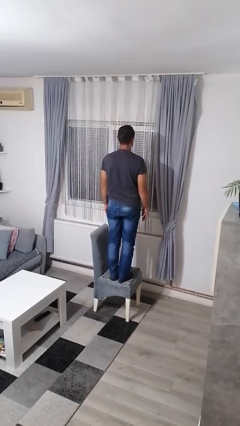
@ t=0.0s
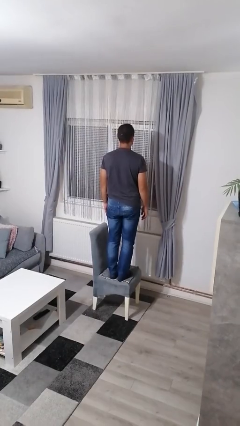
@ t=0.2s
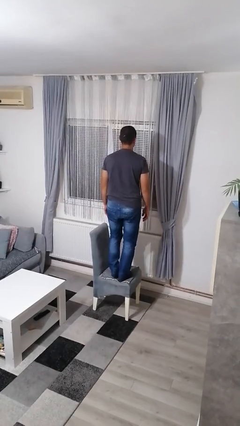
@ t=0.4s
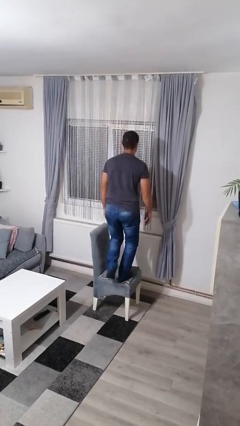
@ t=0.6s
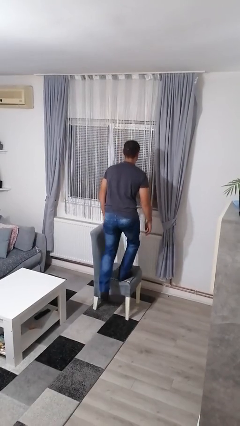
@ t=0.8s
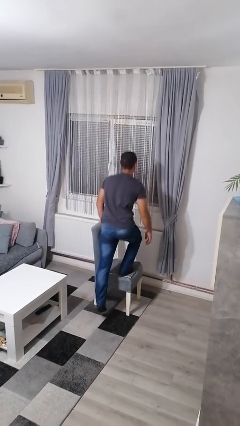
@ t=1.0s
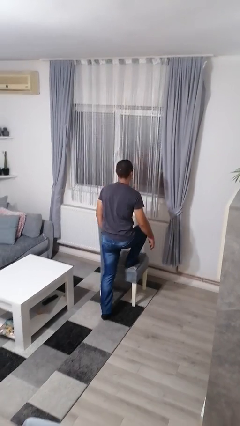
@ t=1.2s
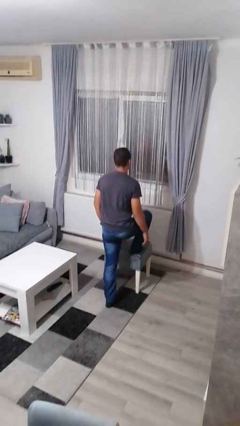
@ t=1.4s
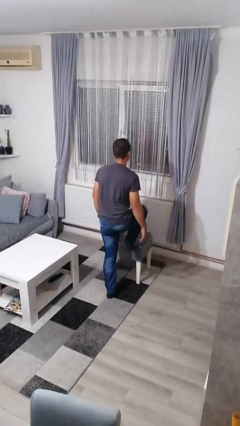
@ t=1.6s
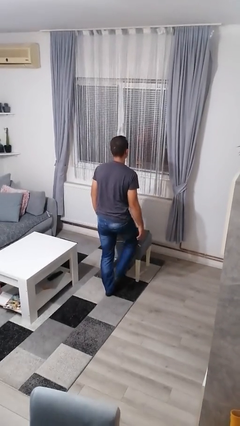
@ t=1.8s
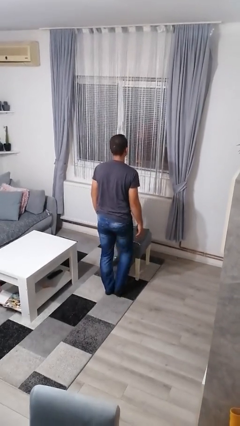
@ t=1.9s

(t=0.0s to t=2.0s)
person climbs off chair

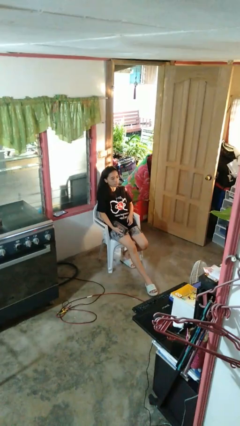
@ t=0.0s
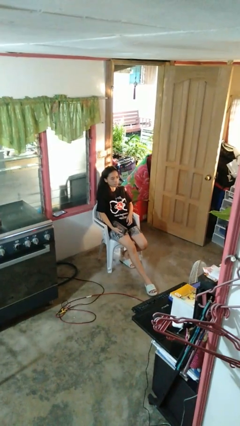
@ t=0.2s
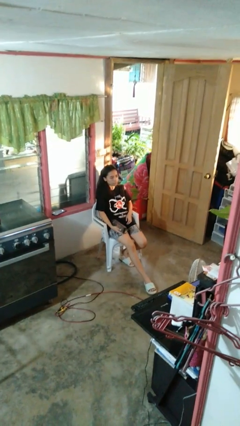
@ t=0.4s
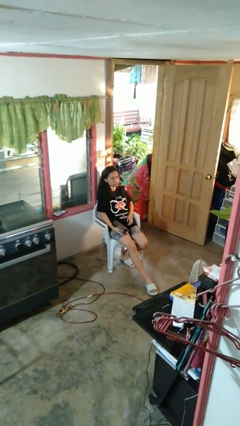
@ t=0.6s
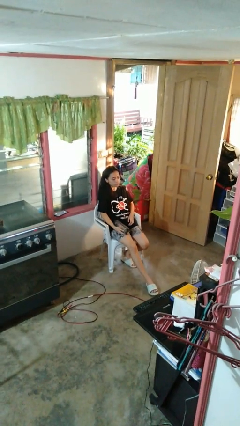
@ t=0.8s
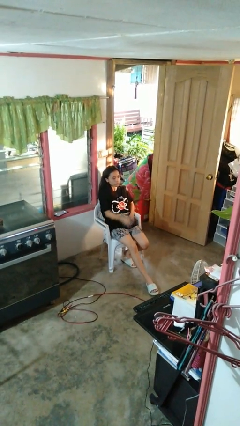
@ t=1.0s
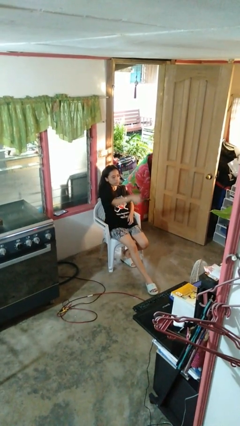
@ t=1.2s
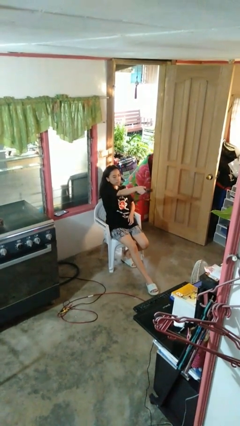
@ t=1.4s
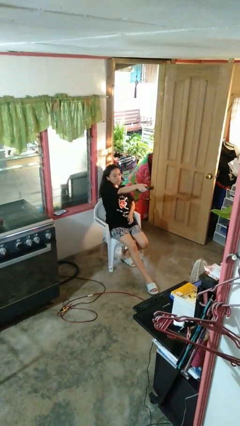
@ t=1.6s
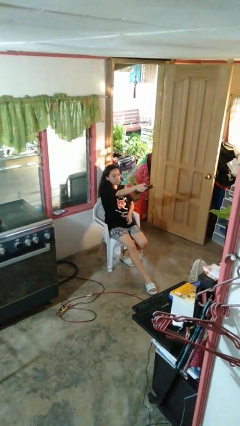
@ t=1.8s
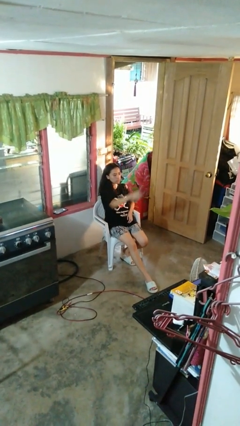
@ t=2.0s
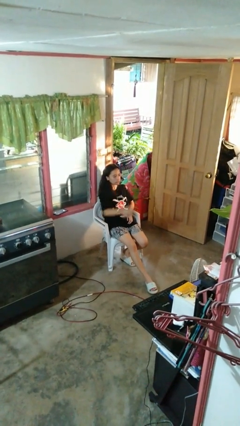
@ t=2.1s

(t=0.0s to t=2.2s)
person uses television remote

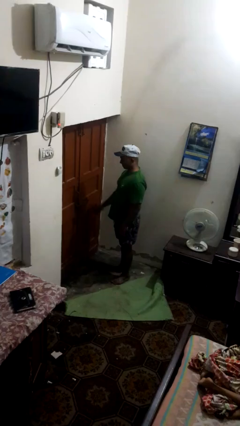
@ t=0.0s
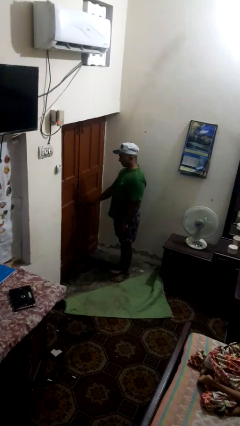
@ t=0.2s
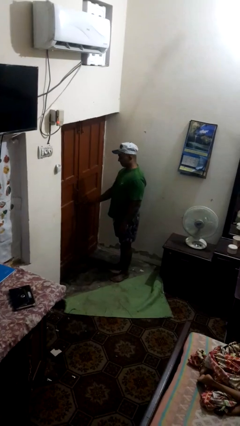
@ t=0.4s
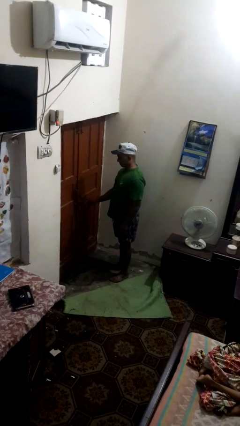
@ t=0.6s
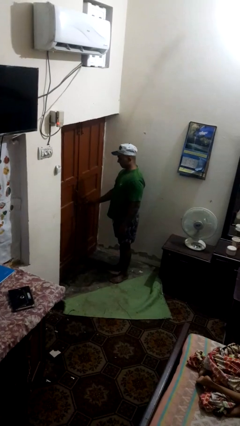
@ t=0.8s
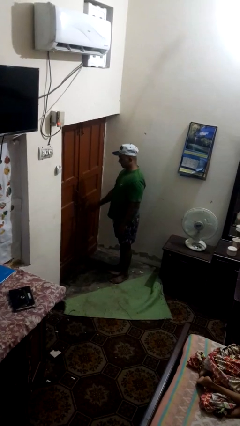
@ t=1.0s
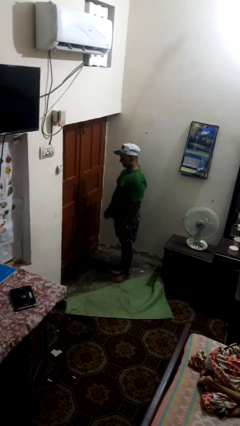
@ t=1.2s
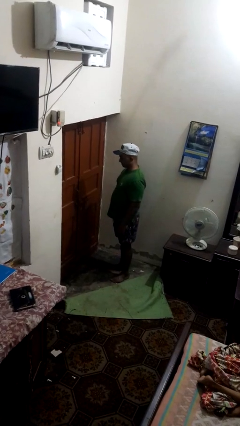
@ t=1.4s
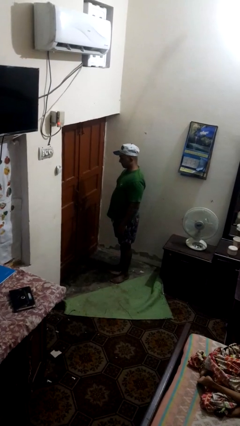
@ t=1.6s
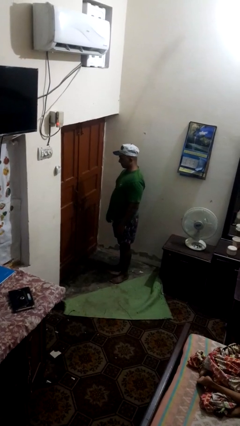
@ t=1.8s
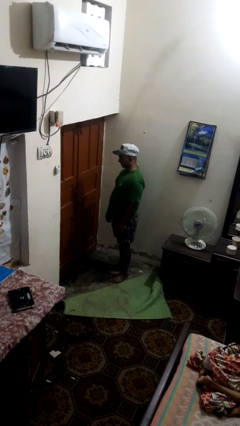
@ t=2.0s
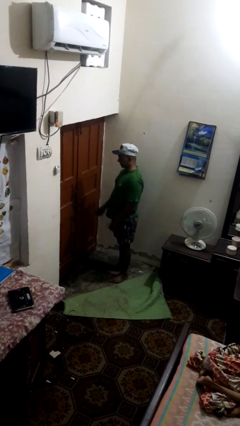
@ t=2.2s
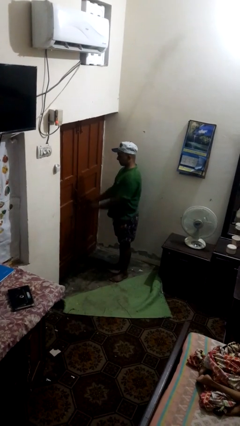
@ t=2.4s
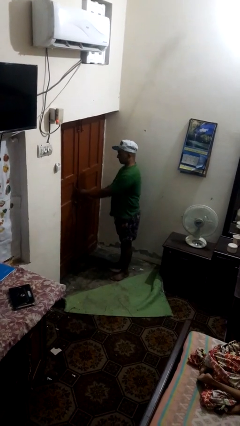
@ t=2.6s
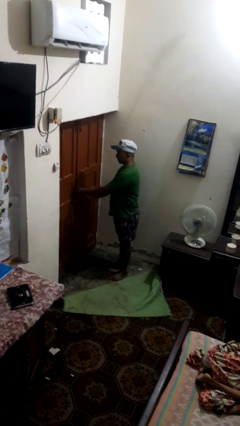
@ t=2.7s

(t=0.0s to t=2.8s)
person unlocks door with keys

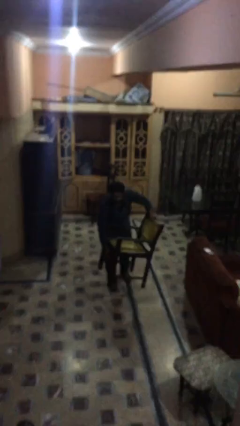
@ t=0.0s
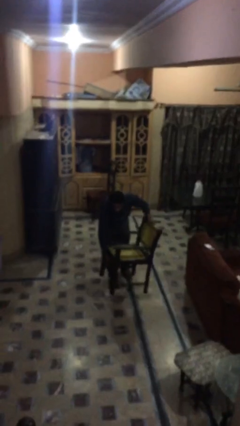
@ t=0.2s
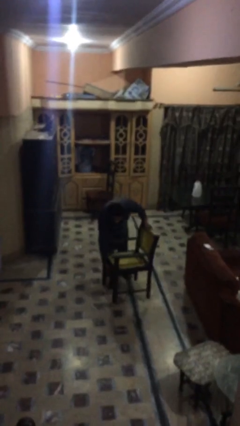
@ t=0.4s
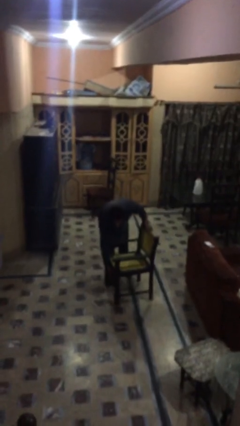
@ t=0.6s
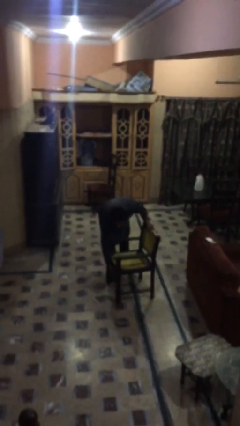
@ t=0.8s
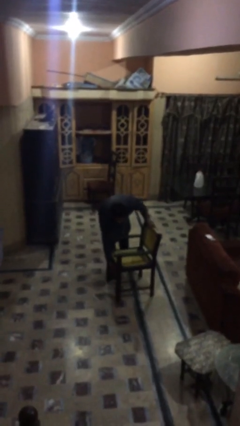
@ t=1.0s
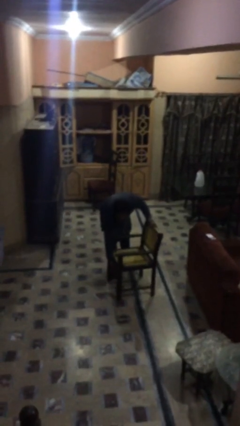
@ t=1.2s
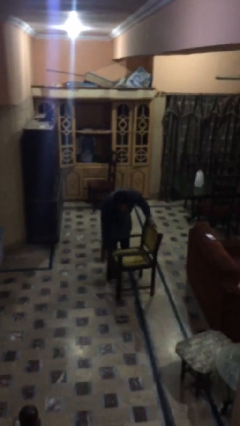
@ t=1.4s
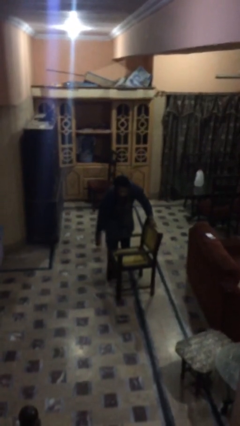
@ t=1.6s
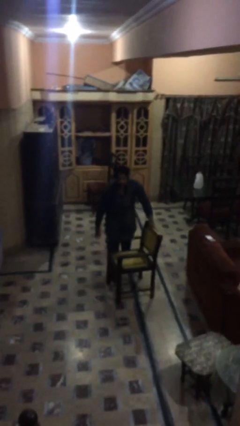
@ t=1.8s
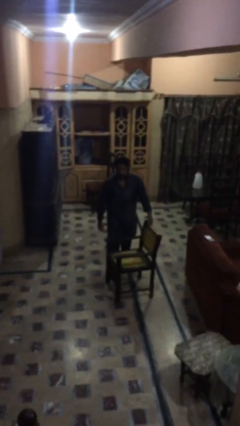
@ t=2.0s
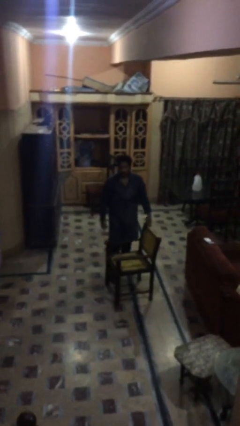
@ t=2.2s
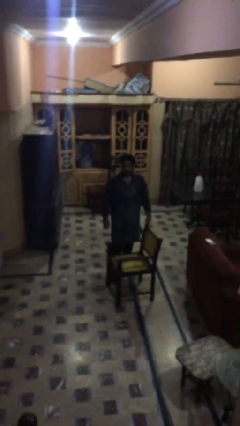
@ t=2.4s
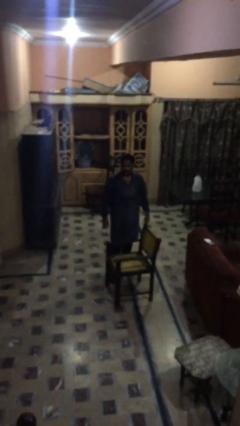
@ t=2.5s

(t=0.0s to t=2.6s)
person puts down object on floor

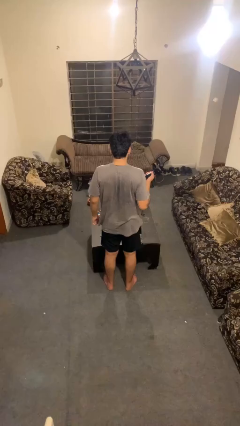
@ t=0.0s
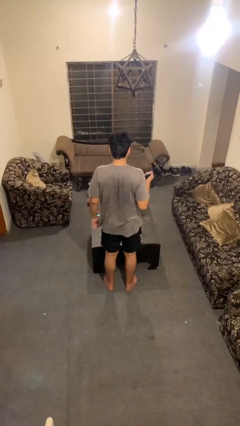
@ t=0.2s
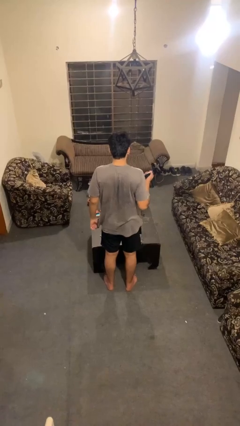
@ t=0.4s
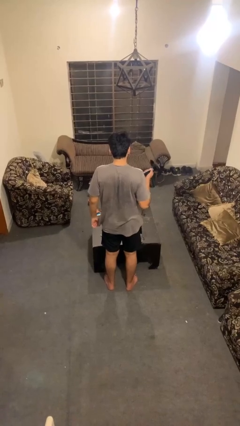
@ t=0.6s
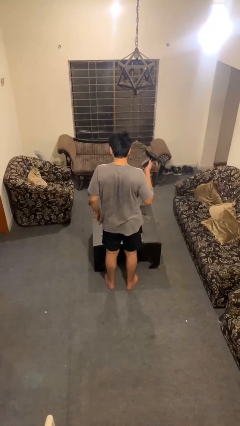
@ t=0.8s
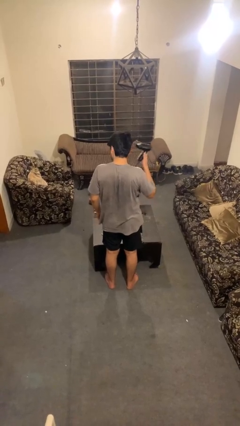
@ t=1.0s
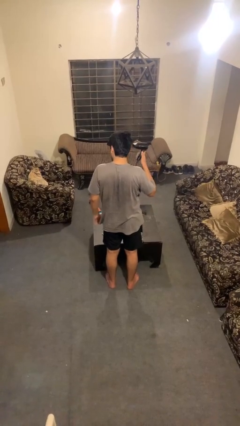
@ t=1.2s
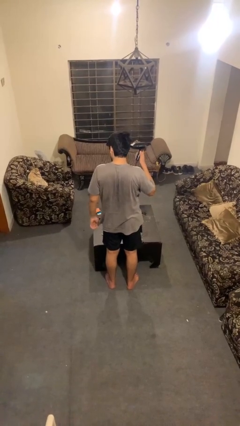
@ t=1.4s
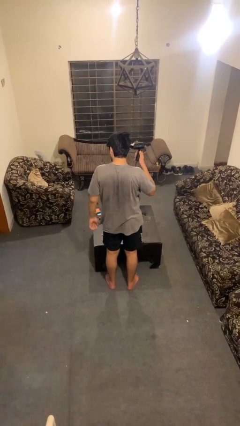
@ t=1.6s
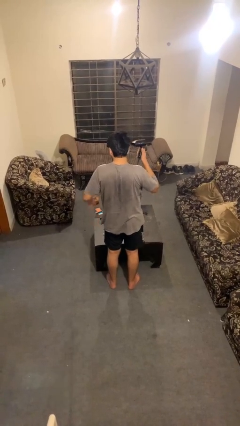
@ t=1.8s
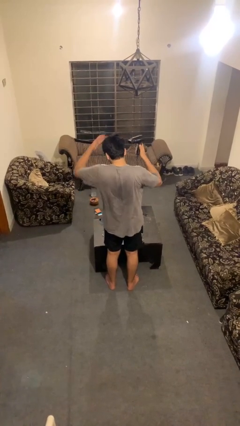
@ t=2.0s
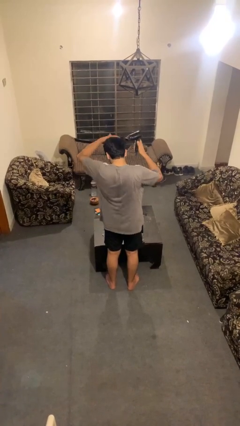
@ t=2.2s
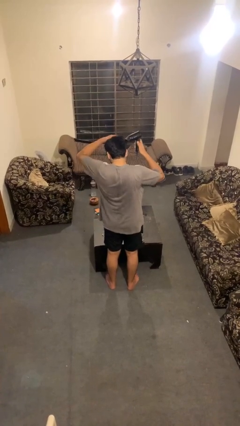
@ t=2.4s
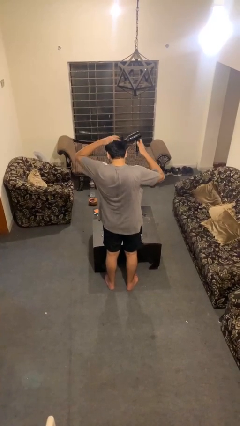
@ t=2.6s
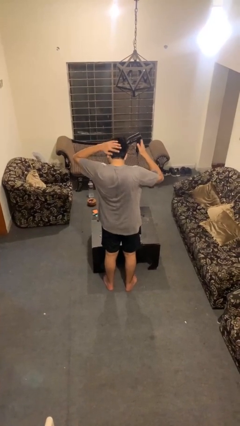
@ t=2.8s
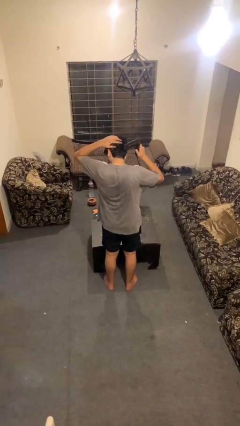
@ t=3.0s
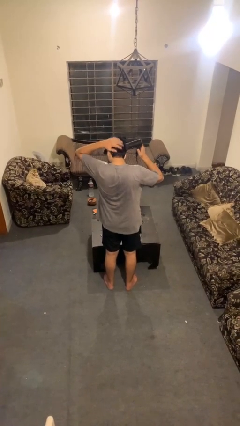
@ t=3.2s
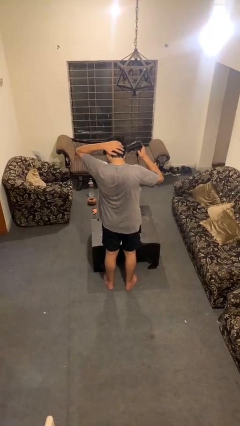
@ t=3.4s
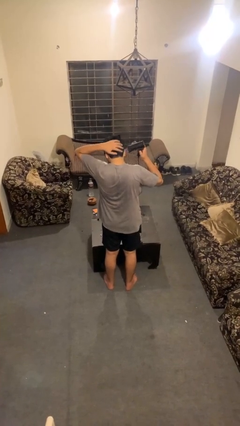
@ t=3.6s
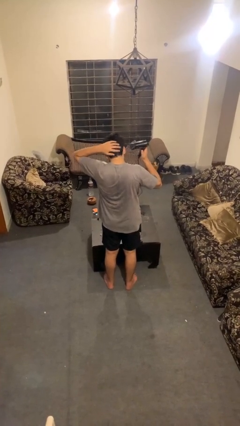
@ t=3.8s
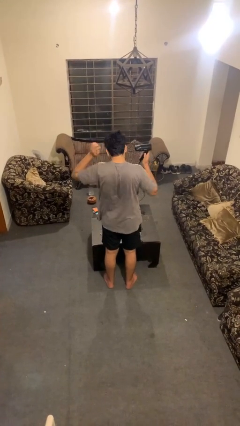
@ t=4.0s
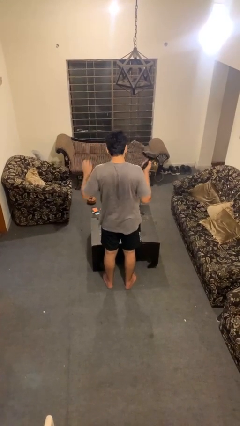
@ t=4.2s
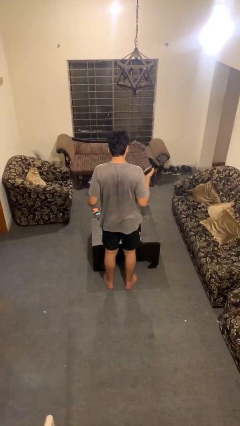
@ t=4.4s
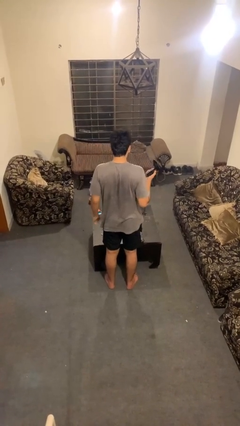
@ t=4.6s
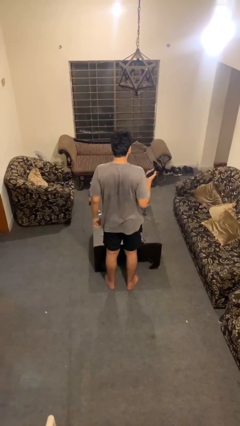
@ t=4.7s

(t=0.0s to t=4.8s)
person dries hair with hairdryer

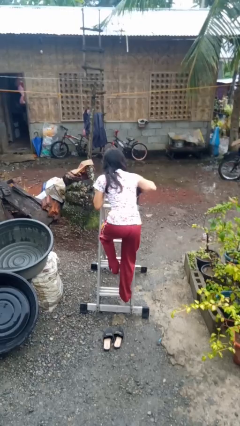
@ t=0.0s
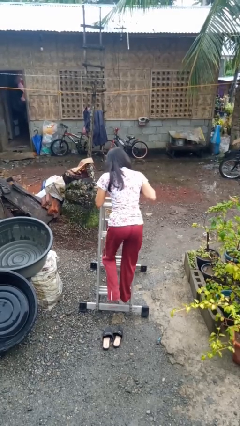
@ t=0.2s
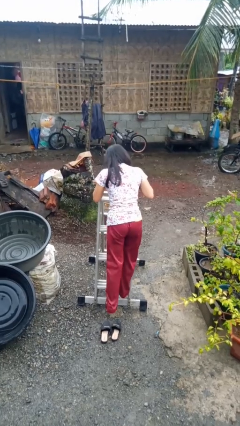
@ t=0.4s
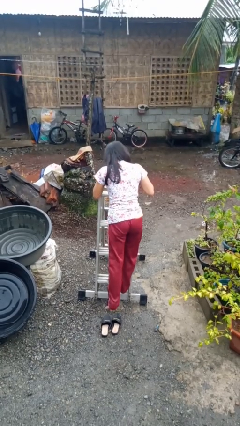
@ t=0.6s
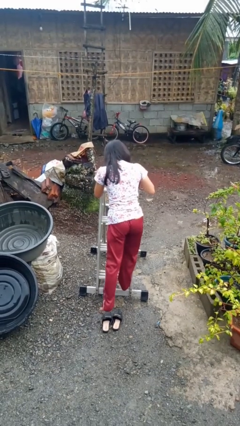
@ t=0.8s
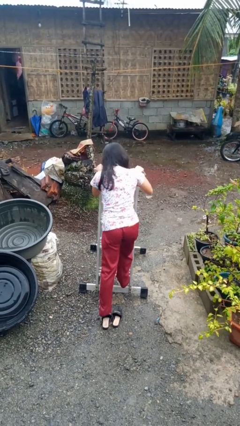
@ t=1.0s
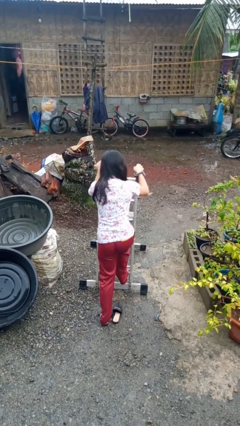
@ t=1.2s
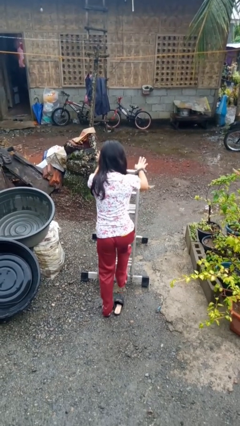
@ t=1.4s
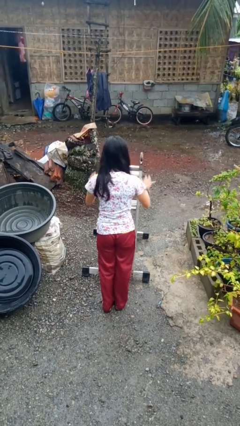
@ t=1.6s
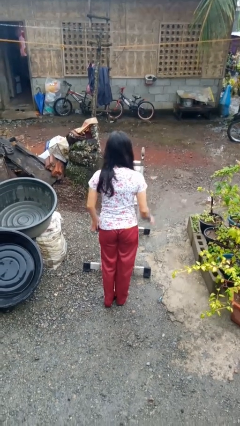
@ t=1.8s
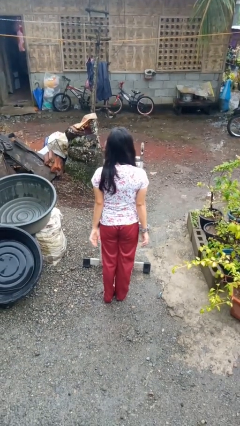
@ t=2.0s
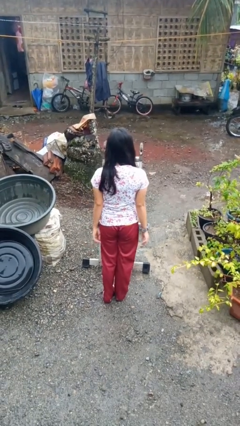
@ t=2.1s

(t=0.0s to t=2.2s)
person climbs down ladder

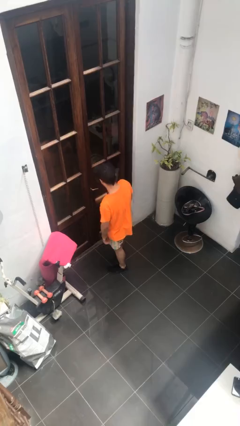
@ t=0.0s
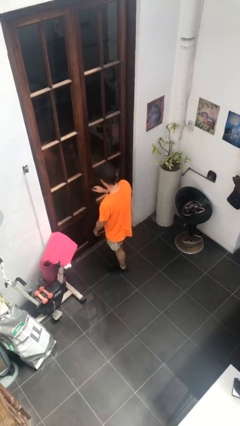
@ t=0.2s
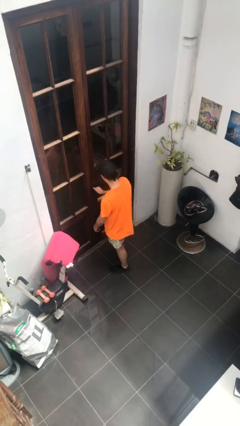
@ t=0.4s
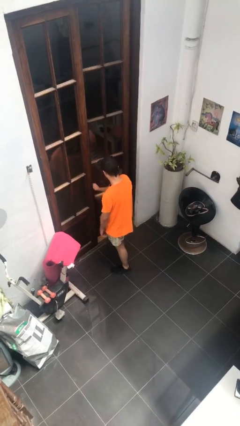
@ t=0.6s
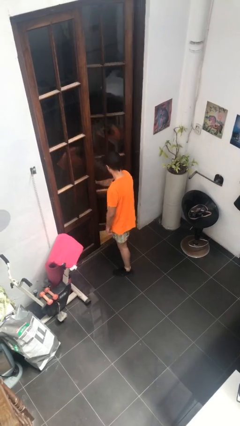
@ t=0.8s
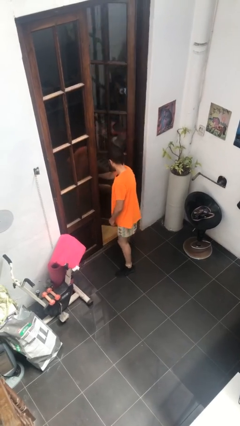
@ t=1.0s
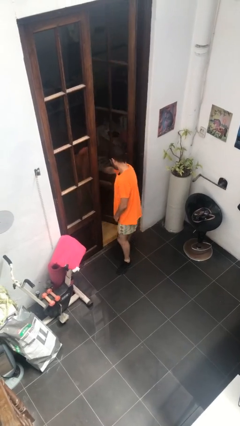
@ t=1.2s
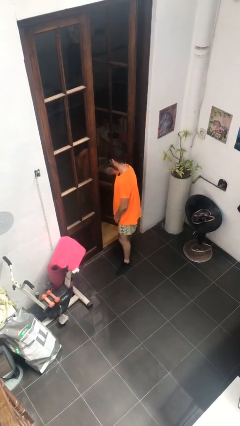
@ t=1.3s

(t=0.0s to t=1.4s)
person opens facility door
